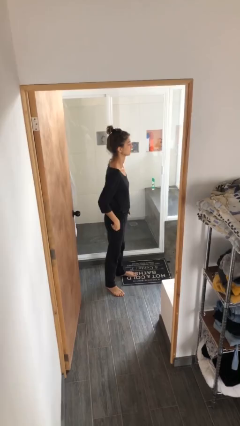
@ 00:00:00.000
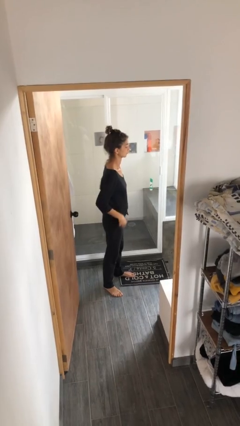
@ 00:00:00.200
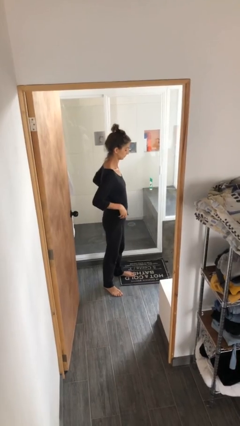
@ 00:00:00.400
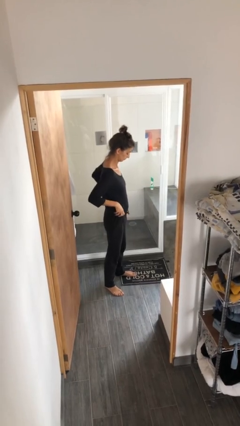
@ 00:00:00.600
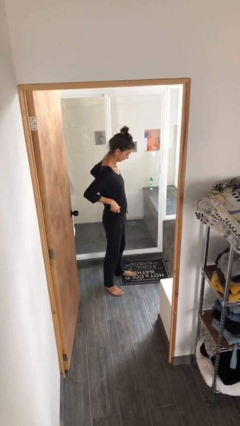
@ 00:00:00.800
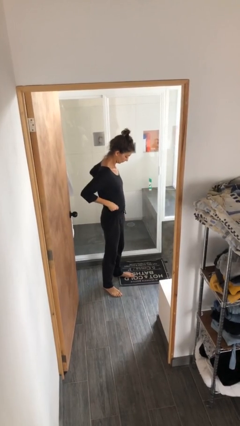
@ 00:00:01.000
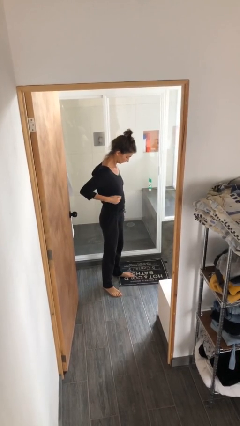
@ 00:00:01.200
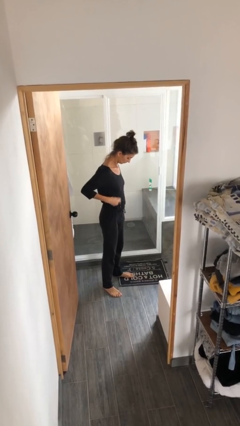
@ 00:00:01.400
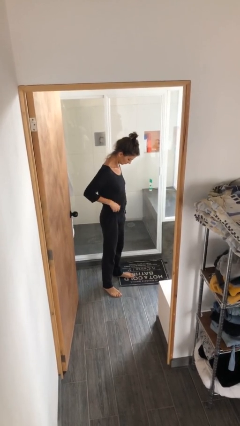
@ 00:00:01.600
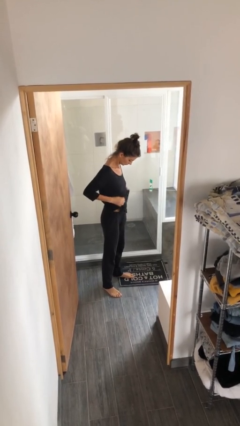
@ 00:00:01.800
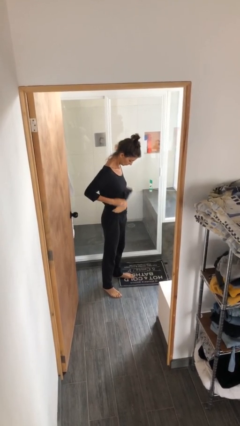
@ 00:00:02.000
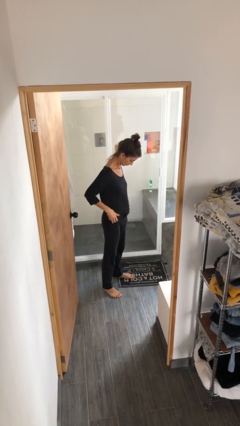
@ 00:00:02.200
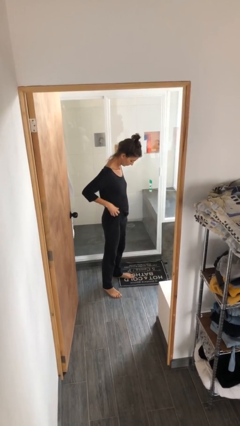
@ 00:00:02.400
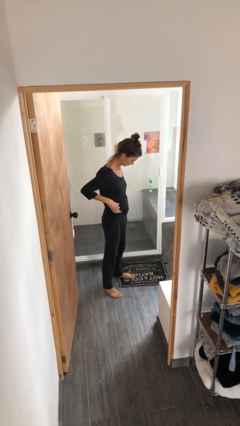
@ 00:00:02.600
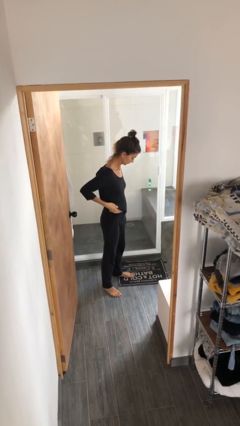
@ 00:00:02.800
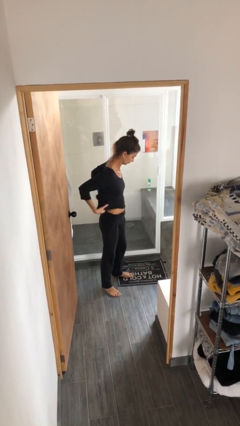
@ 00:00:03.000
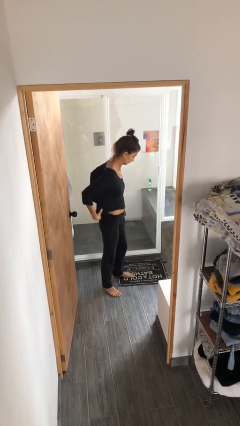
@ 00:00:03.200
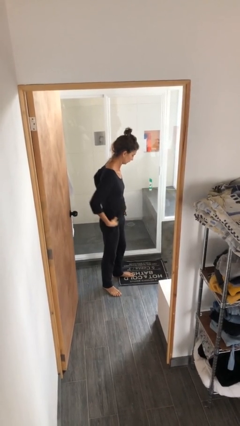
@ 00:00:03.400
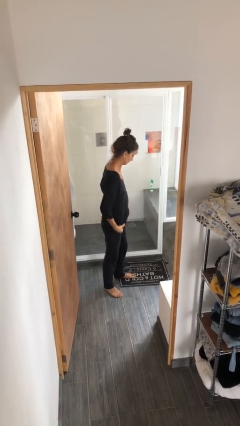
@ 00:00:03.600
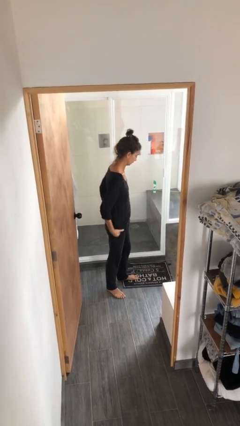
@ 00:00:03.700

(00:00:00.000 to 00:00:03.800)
person untucks shirt

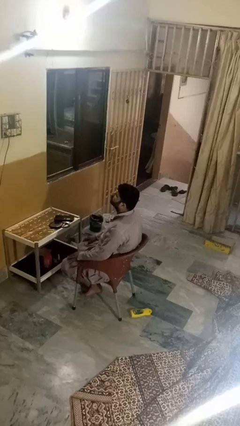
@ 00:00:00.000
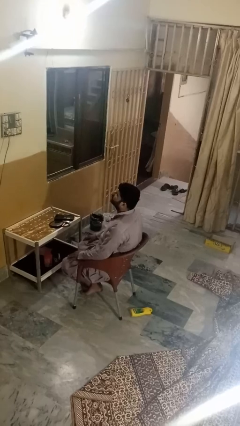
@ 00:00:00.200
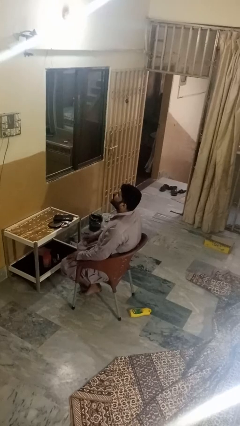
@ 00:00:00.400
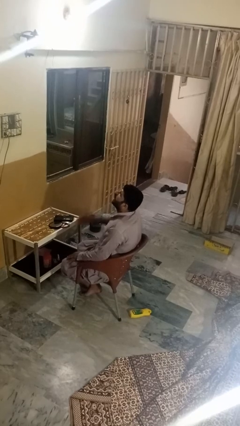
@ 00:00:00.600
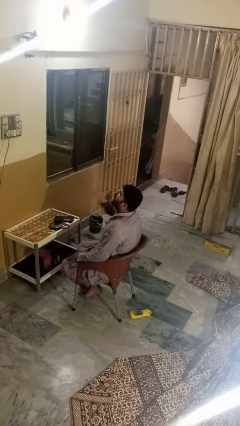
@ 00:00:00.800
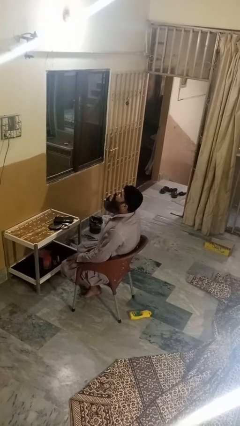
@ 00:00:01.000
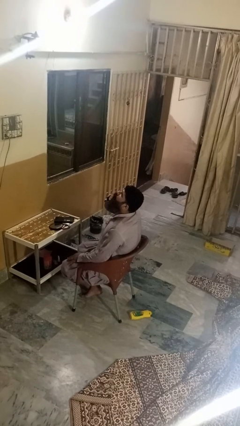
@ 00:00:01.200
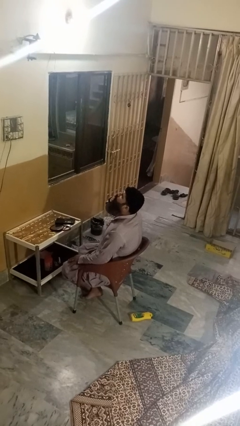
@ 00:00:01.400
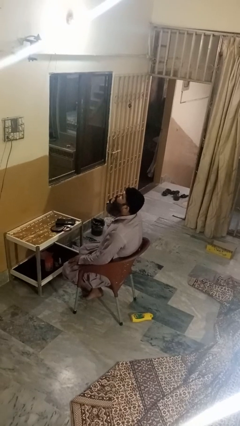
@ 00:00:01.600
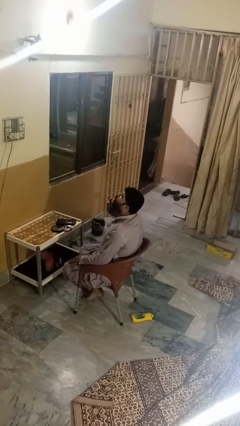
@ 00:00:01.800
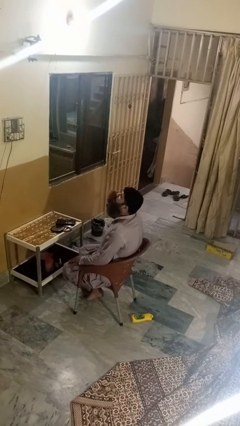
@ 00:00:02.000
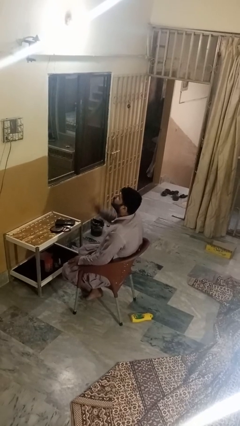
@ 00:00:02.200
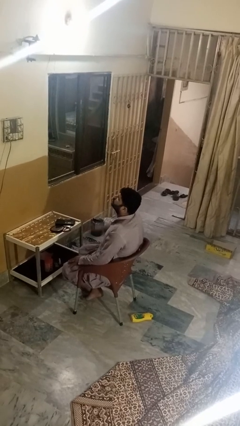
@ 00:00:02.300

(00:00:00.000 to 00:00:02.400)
person yawns

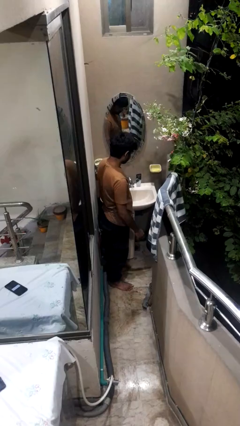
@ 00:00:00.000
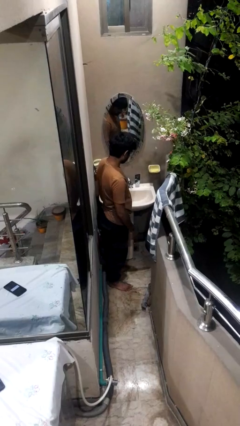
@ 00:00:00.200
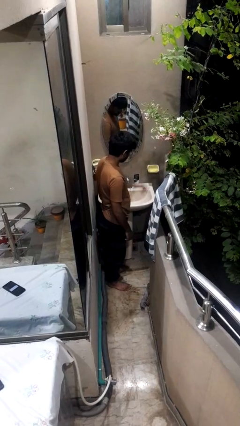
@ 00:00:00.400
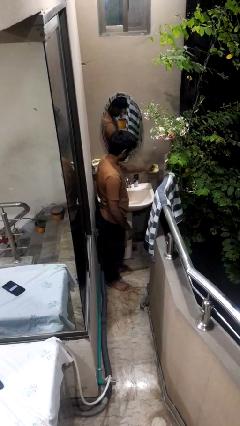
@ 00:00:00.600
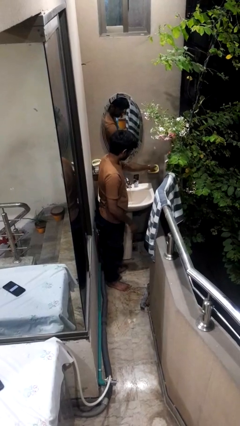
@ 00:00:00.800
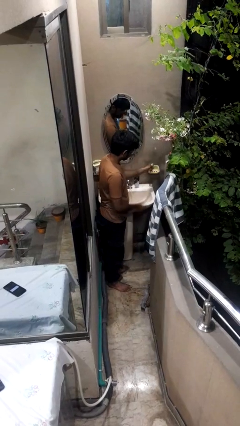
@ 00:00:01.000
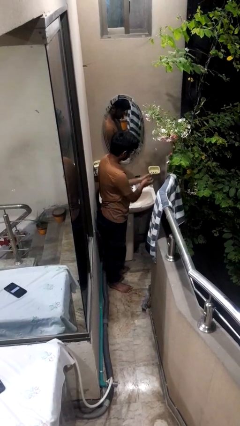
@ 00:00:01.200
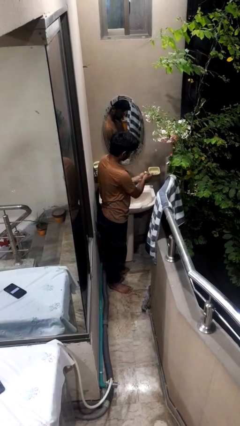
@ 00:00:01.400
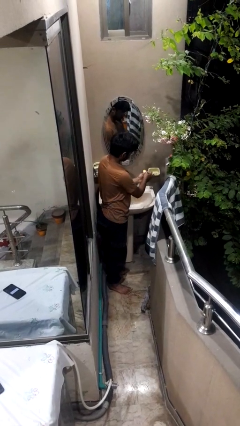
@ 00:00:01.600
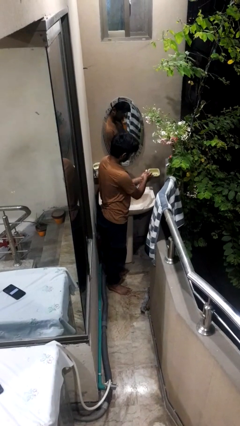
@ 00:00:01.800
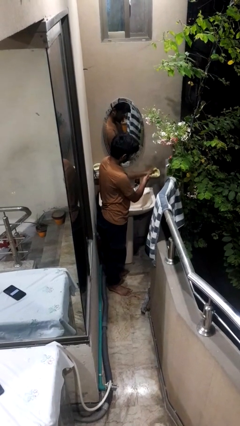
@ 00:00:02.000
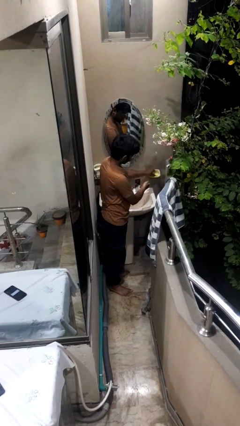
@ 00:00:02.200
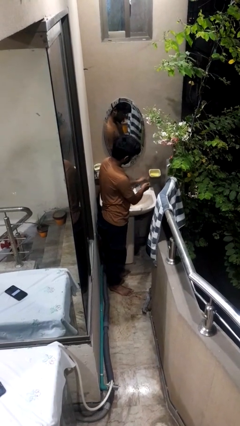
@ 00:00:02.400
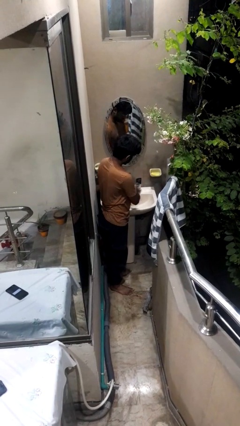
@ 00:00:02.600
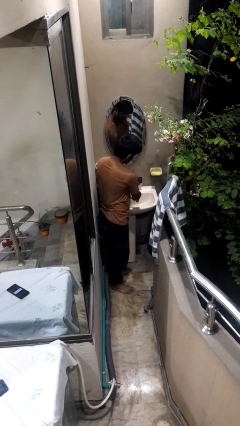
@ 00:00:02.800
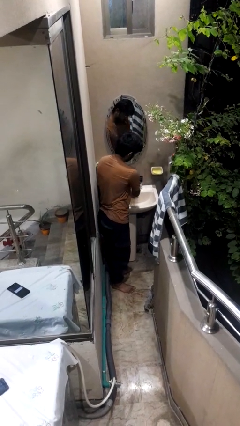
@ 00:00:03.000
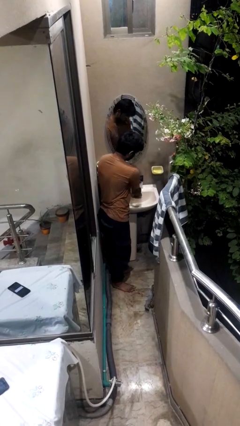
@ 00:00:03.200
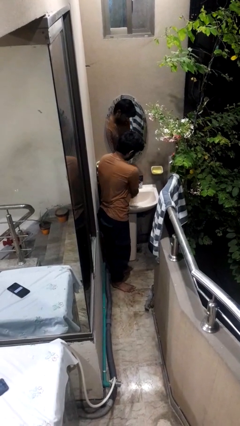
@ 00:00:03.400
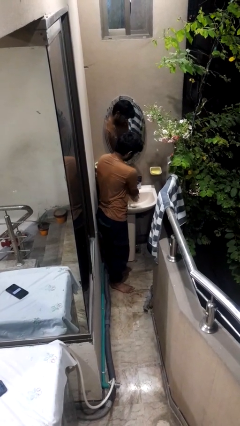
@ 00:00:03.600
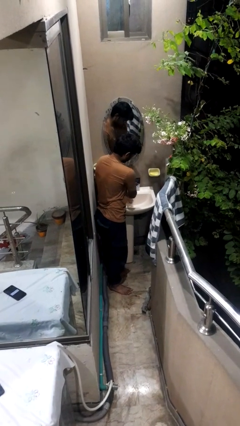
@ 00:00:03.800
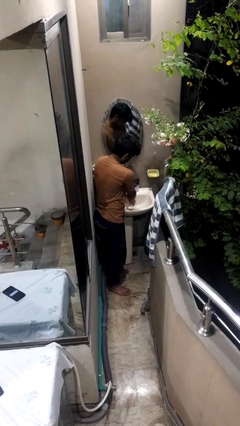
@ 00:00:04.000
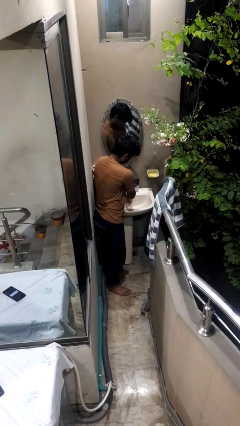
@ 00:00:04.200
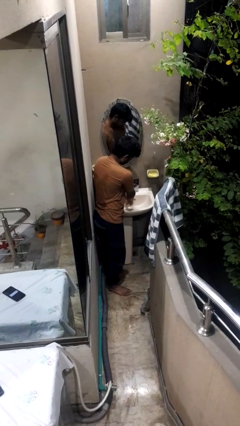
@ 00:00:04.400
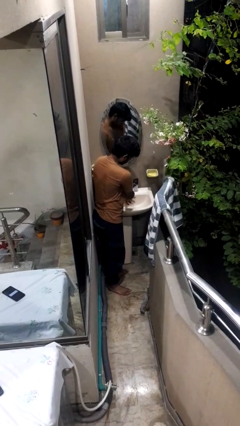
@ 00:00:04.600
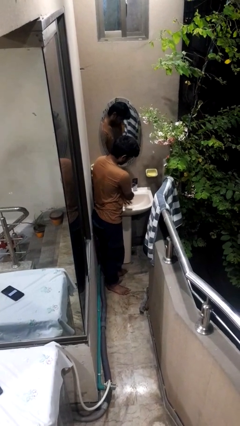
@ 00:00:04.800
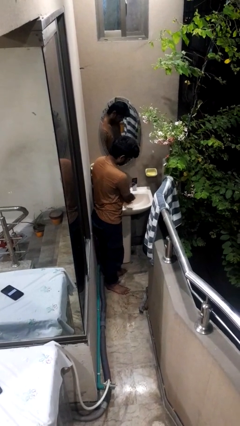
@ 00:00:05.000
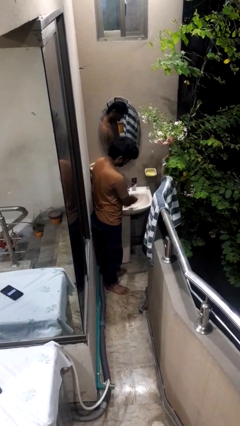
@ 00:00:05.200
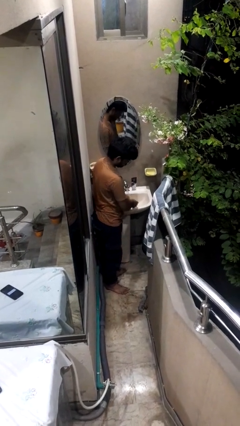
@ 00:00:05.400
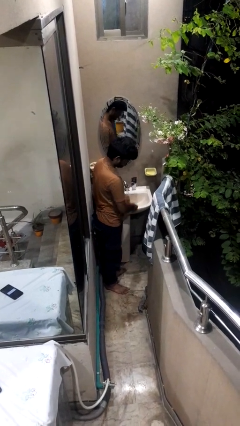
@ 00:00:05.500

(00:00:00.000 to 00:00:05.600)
person washes hands

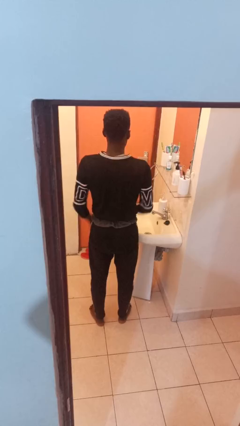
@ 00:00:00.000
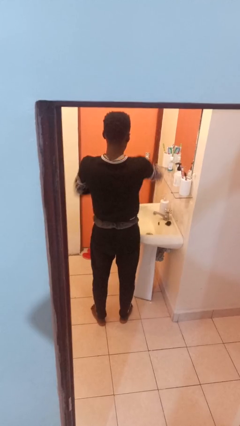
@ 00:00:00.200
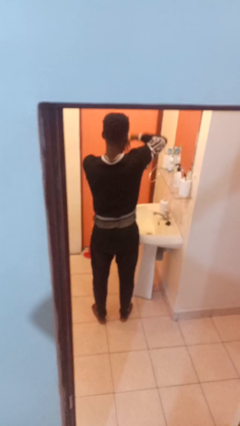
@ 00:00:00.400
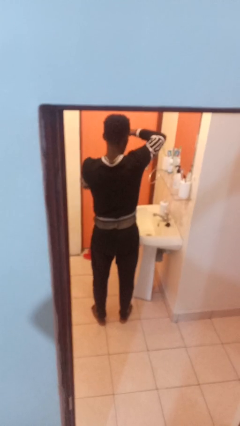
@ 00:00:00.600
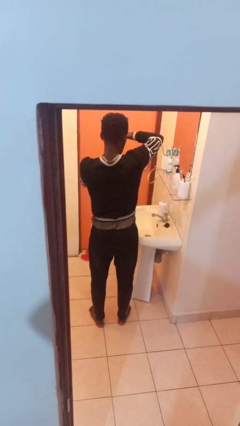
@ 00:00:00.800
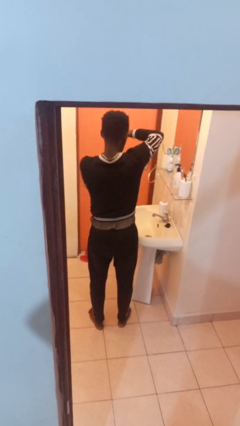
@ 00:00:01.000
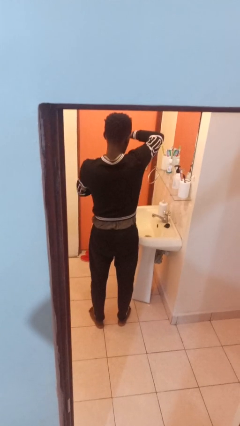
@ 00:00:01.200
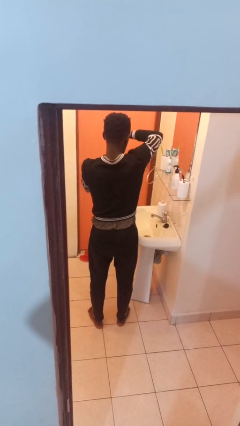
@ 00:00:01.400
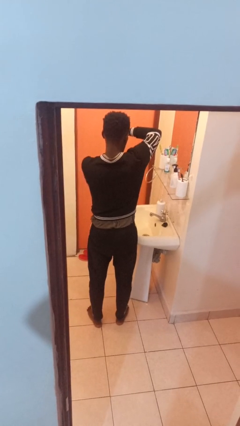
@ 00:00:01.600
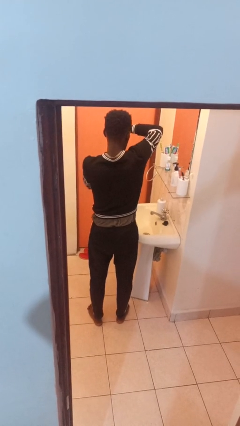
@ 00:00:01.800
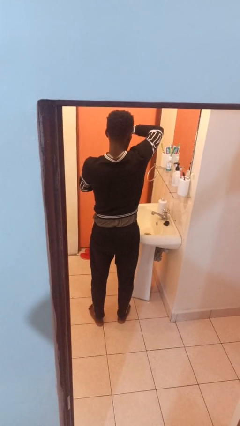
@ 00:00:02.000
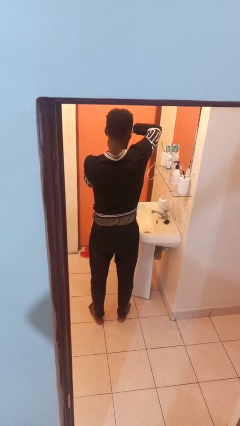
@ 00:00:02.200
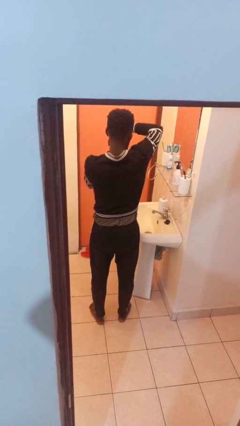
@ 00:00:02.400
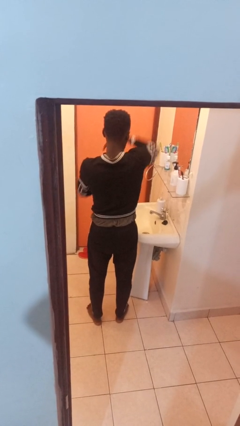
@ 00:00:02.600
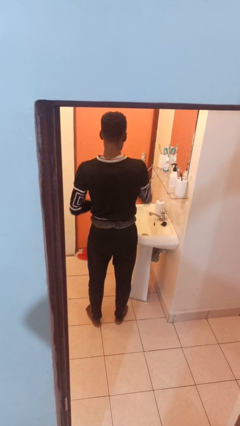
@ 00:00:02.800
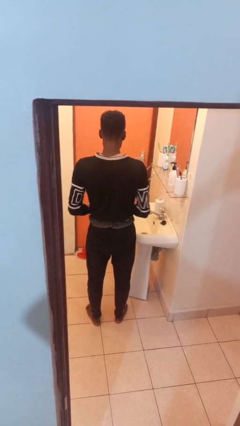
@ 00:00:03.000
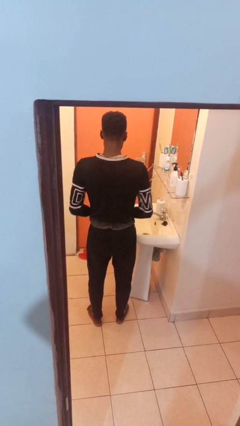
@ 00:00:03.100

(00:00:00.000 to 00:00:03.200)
person applies deodorant

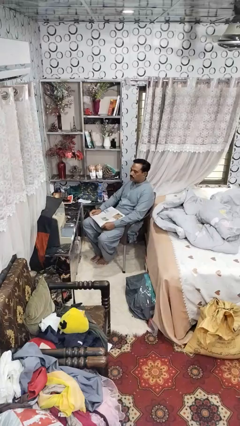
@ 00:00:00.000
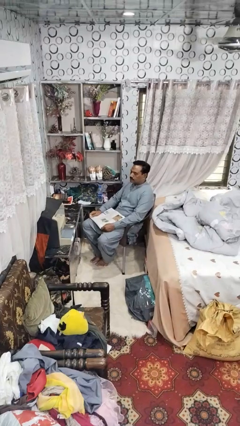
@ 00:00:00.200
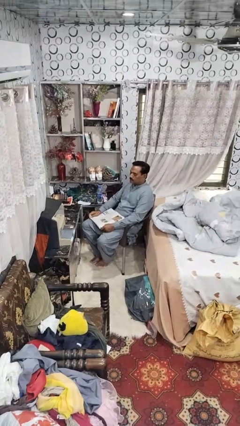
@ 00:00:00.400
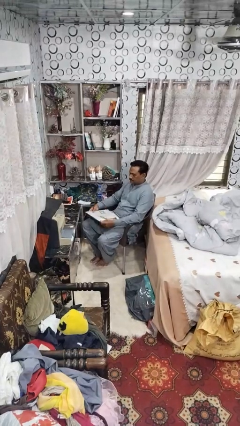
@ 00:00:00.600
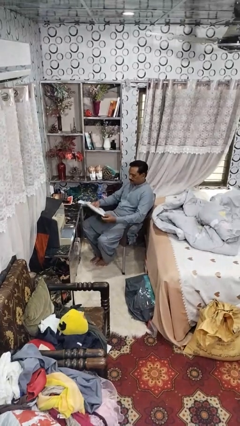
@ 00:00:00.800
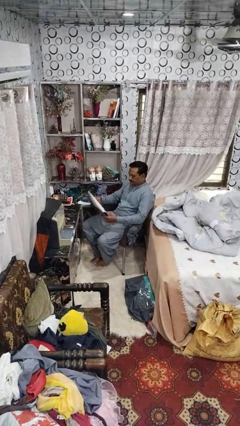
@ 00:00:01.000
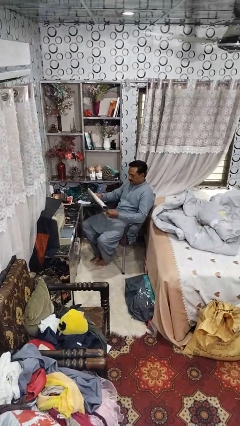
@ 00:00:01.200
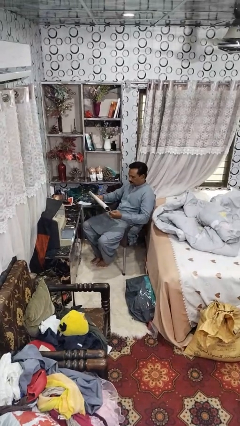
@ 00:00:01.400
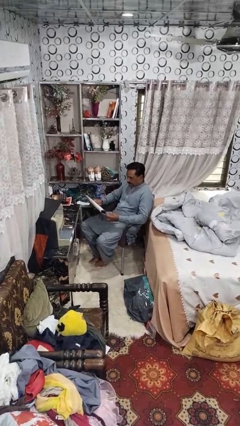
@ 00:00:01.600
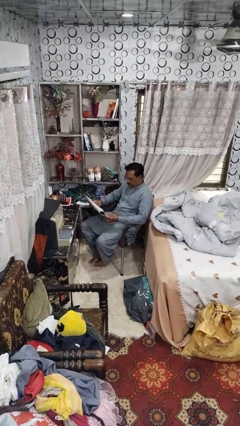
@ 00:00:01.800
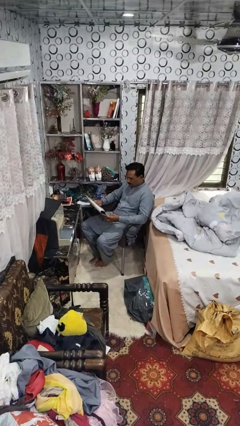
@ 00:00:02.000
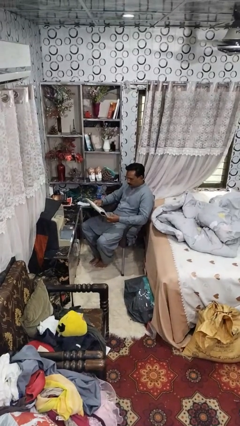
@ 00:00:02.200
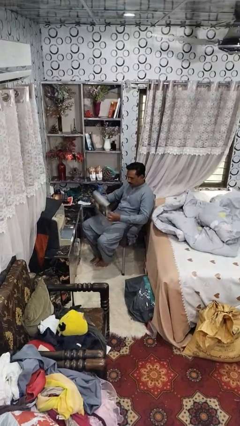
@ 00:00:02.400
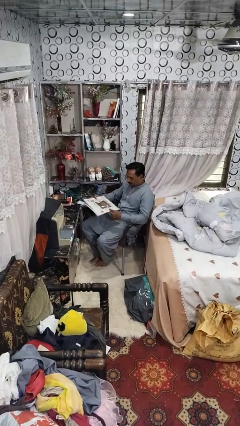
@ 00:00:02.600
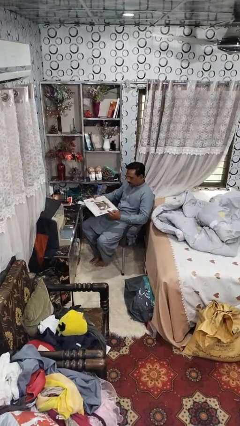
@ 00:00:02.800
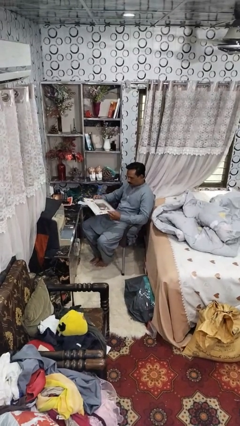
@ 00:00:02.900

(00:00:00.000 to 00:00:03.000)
person reads newspaper
